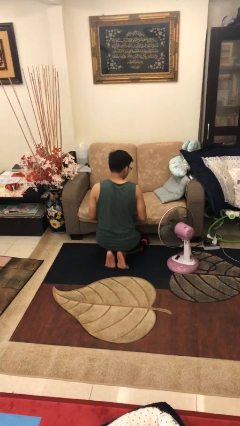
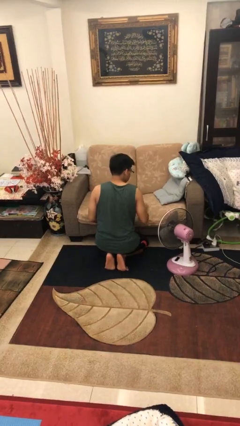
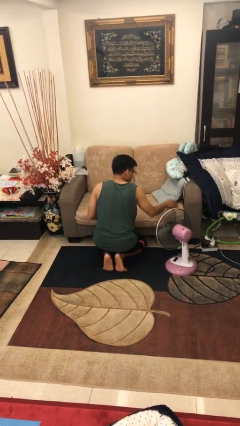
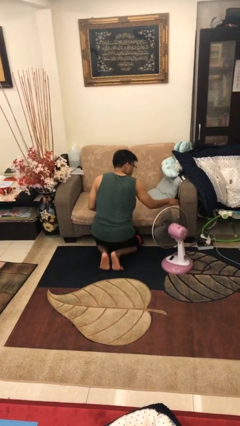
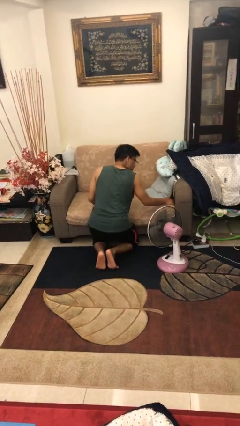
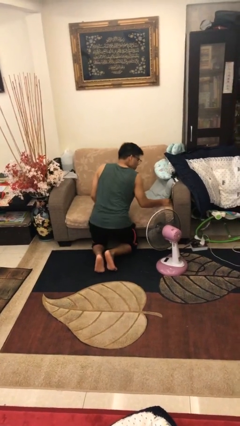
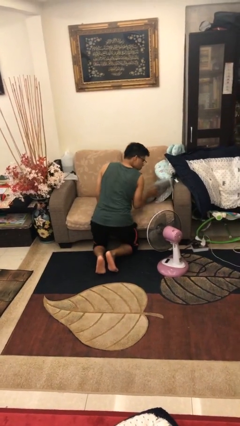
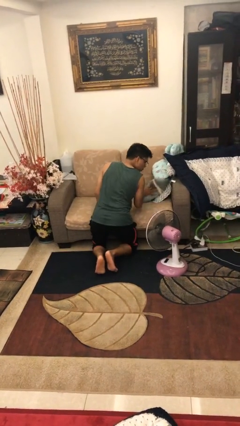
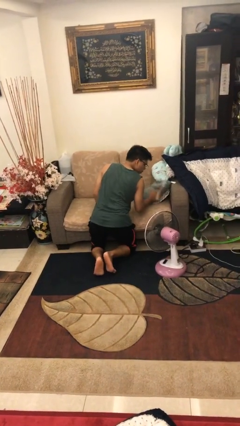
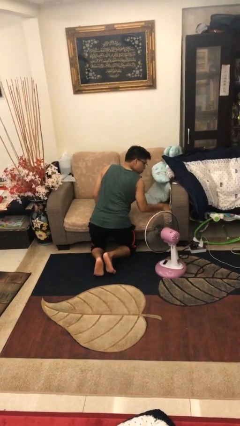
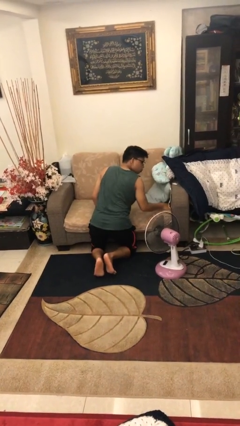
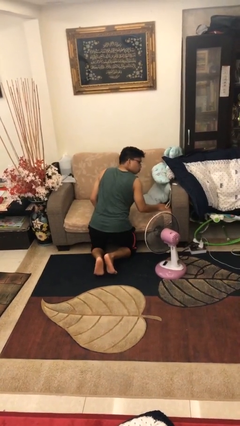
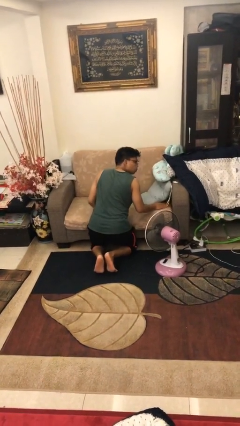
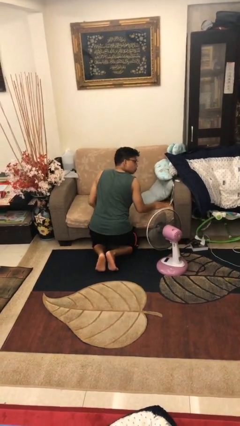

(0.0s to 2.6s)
person searches in couch

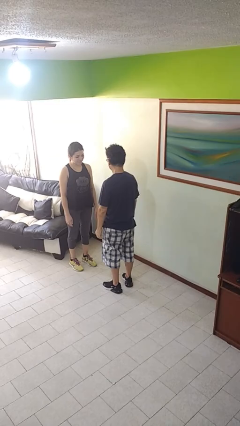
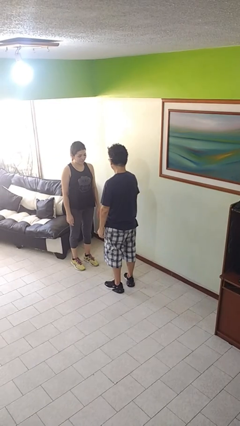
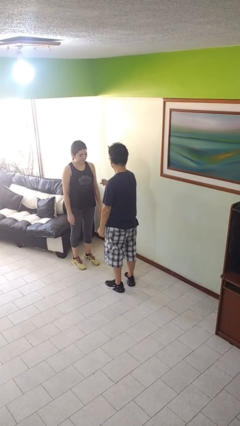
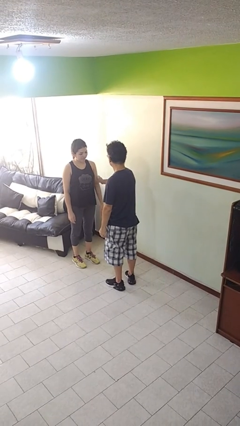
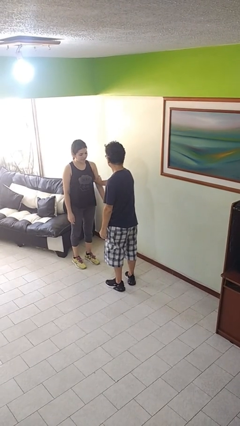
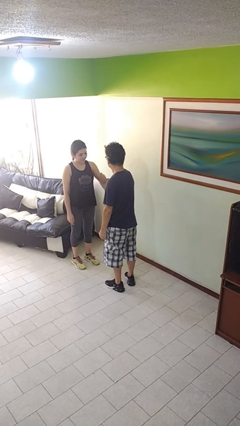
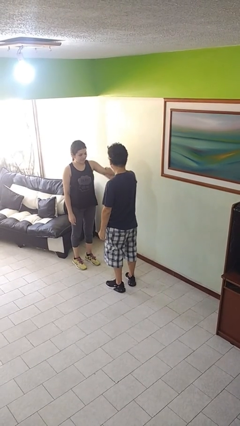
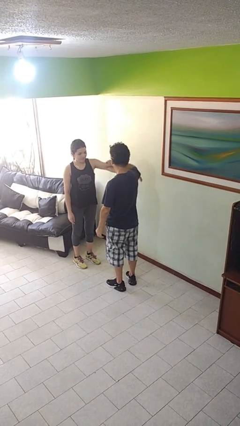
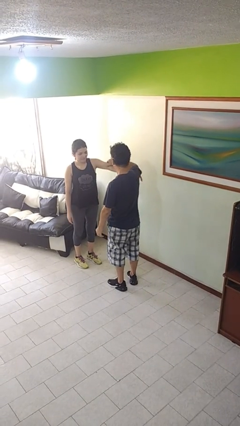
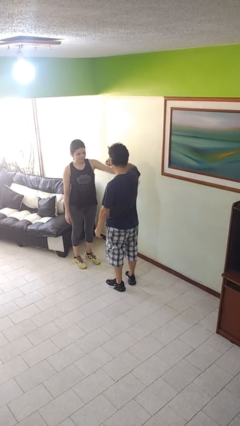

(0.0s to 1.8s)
person grabs person by bicep

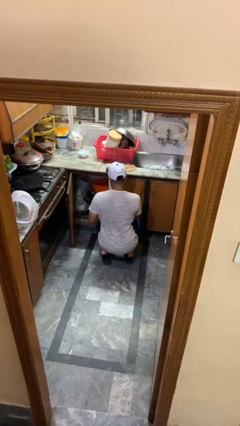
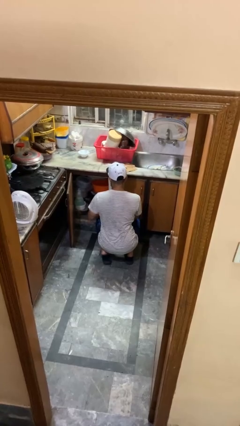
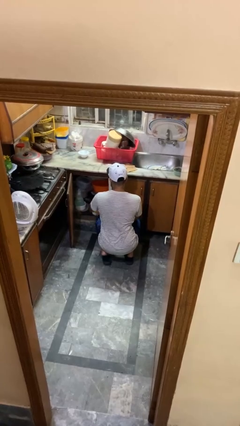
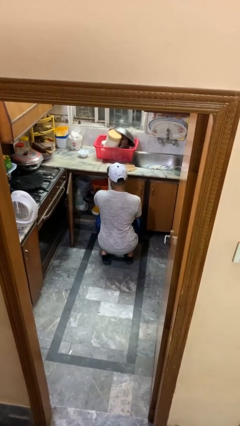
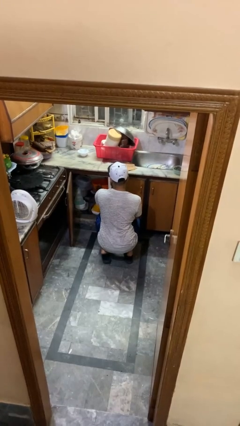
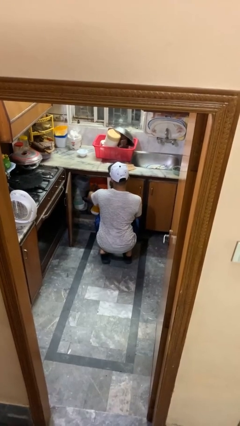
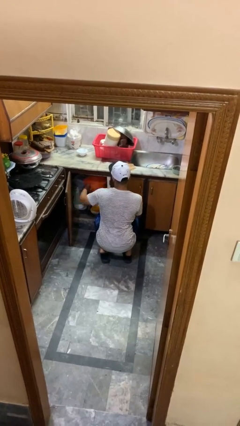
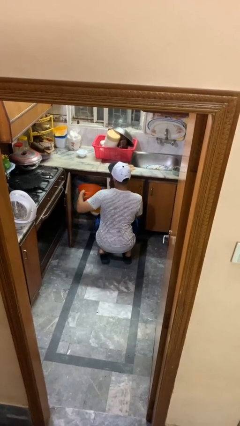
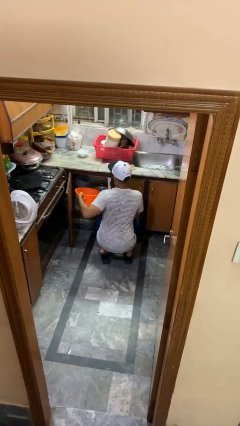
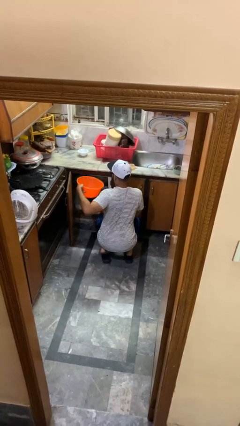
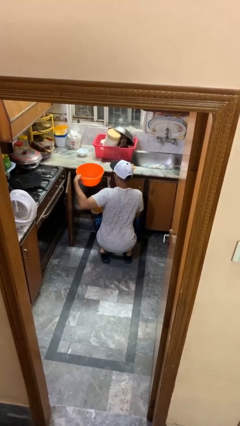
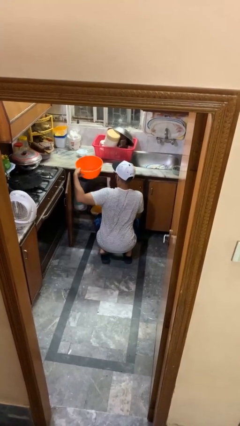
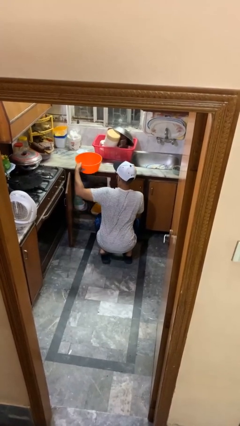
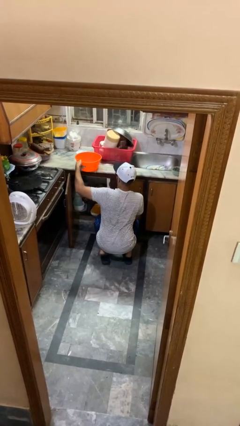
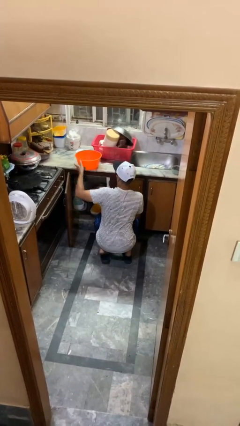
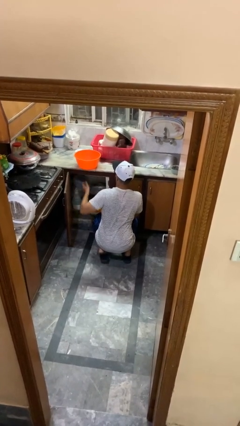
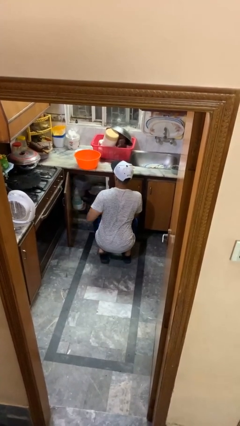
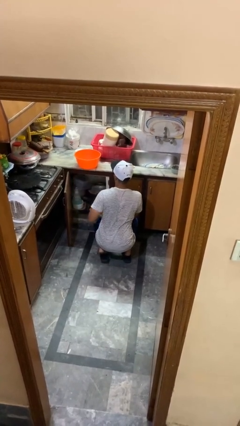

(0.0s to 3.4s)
person takes object from kitchen drawer

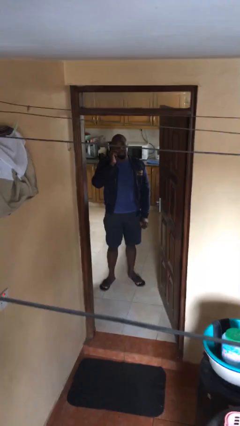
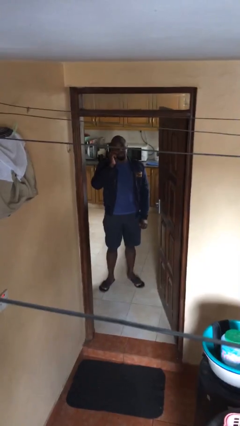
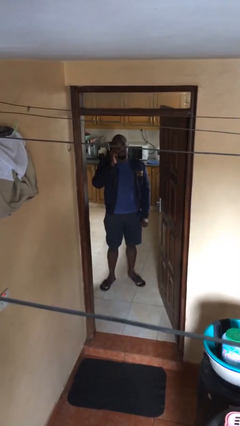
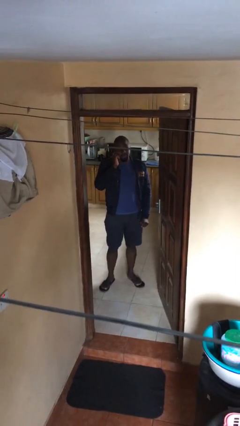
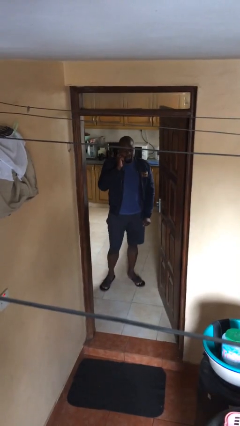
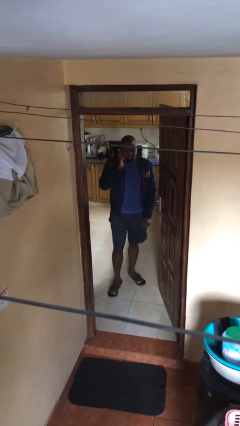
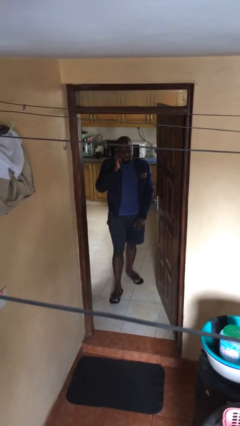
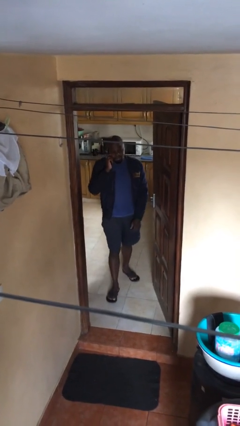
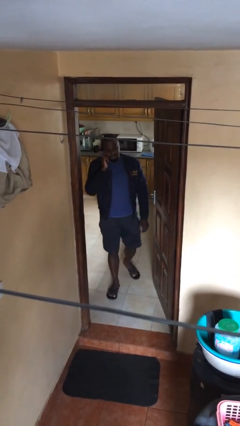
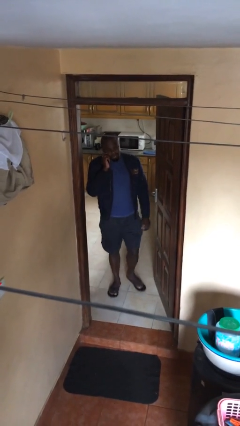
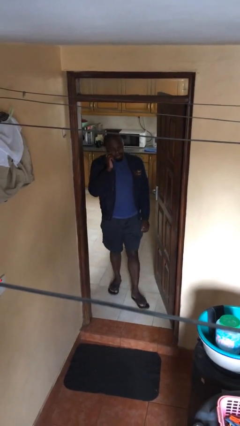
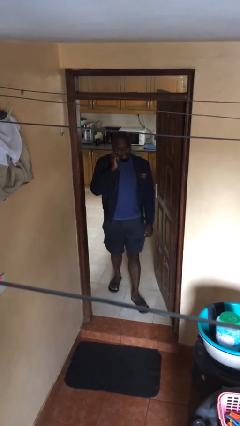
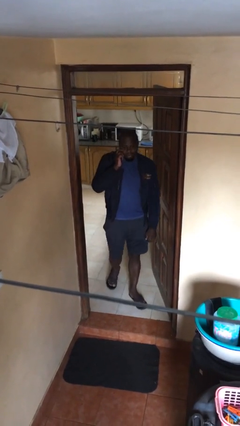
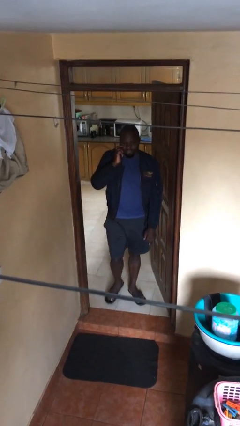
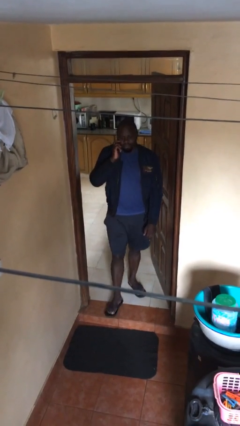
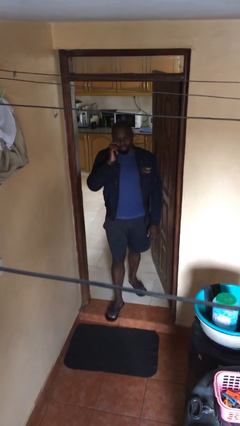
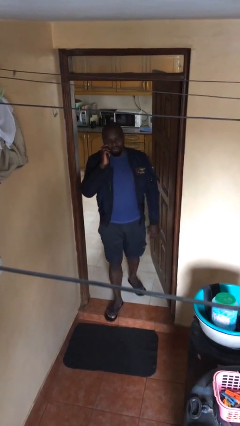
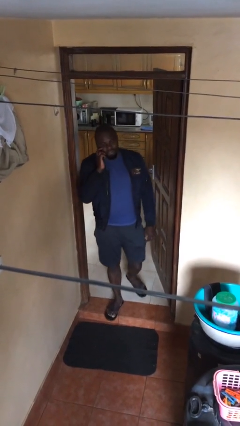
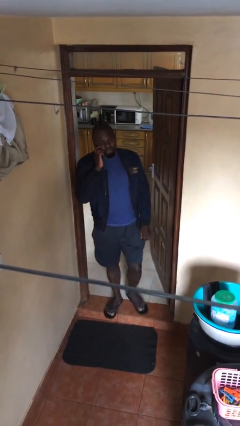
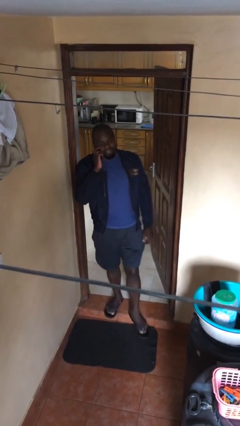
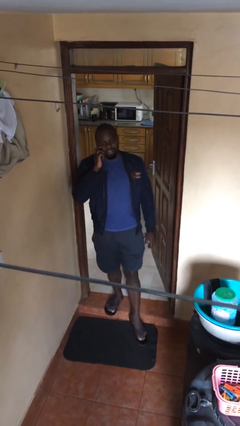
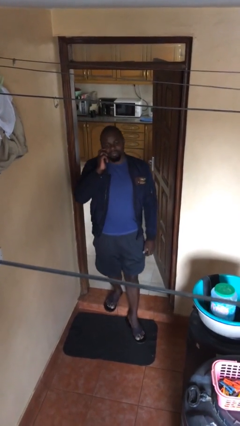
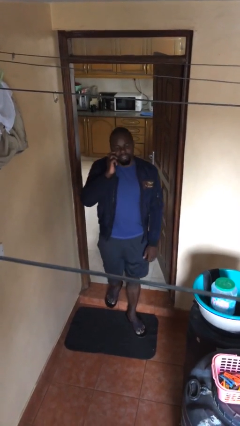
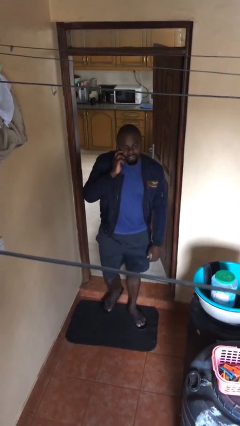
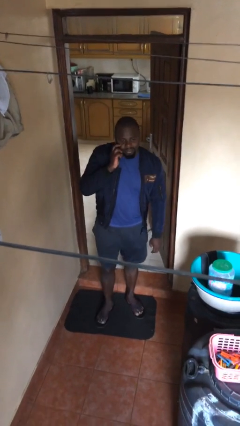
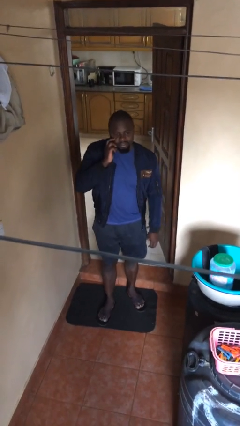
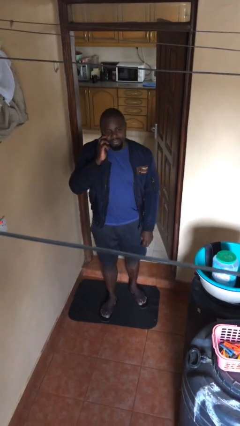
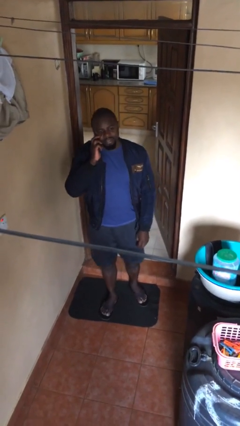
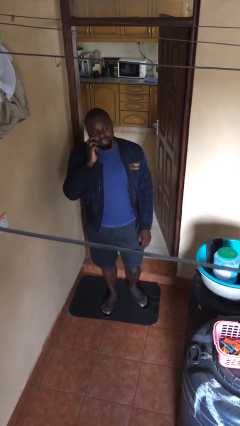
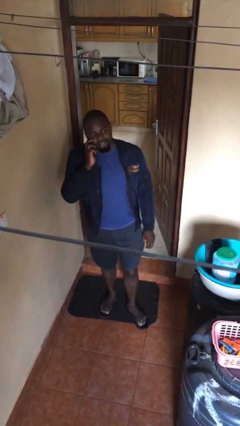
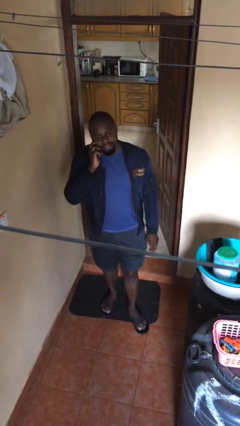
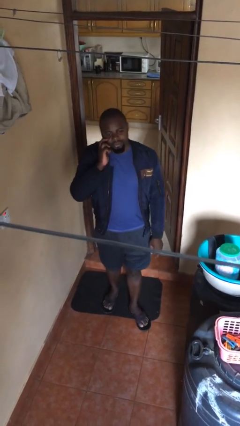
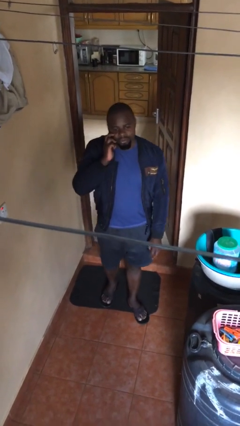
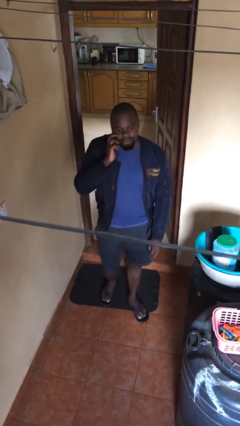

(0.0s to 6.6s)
person enters scene through structure

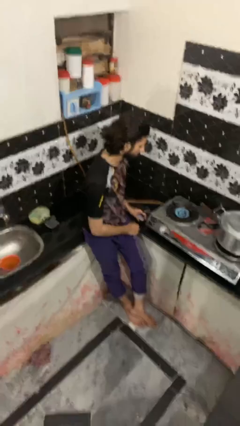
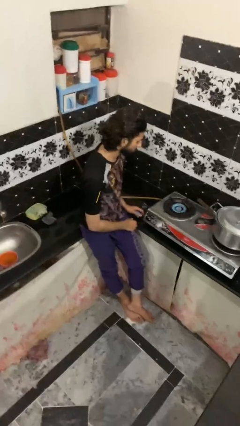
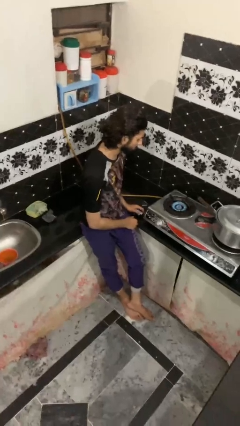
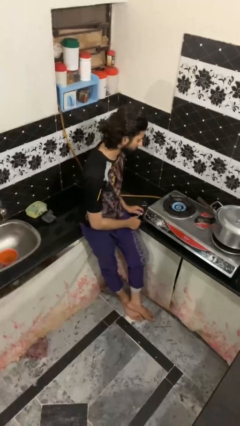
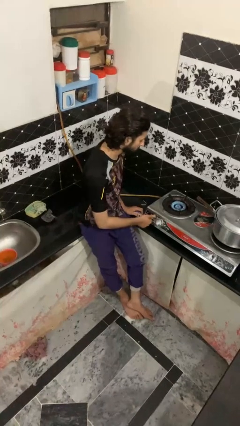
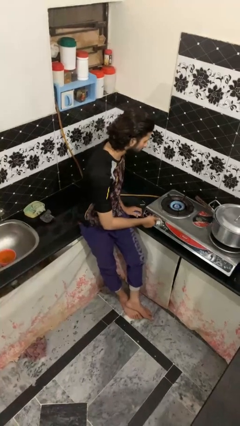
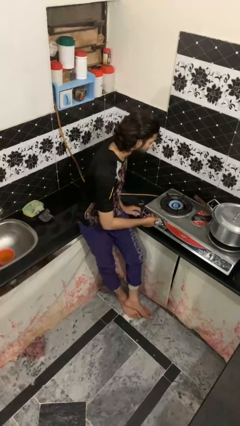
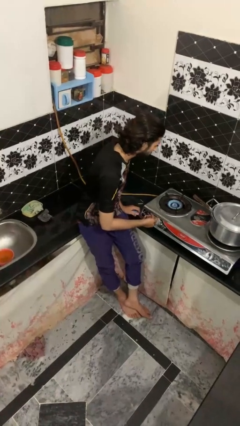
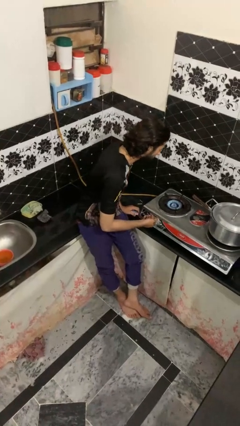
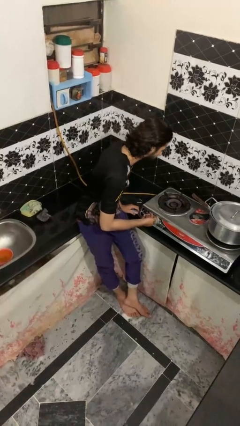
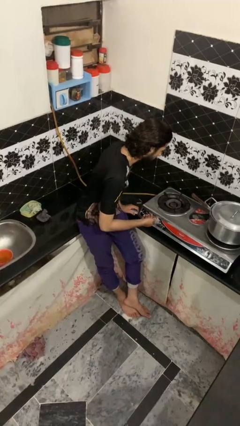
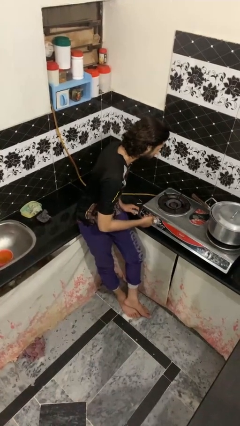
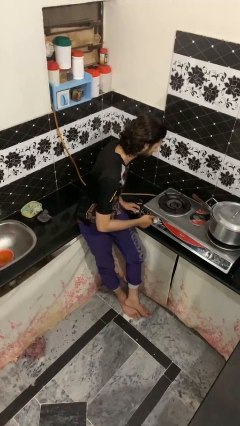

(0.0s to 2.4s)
person turns off stovetop

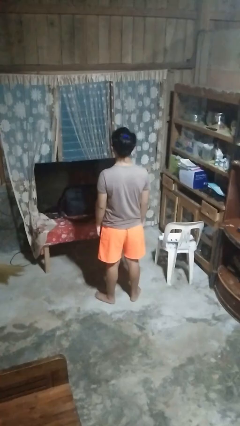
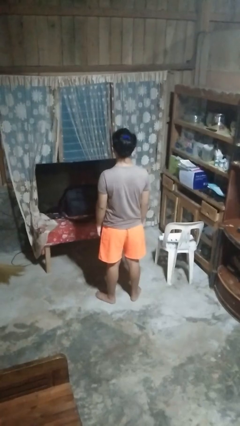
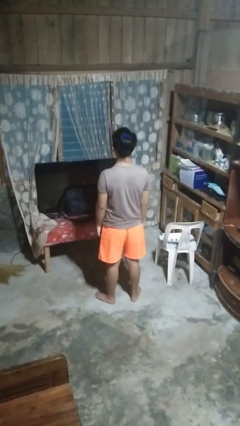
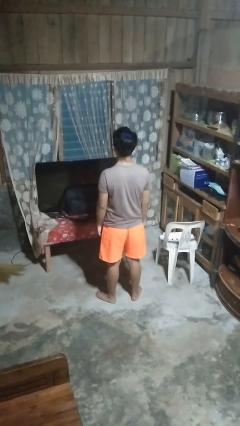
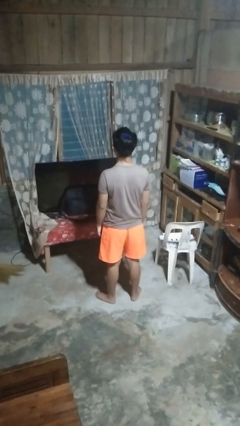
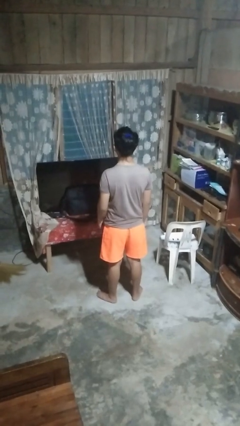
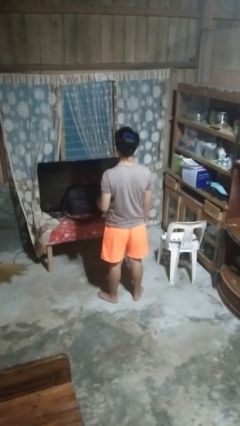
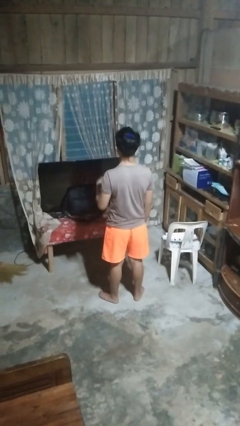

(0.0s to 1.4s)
person gestures number four
